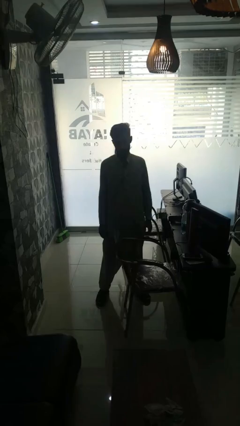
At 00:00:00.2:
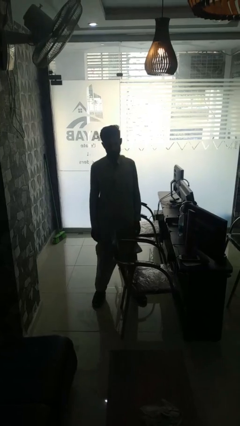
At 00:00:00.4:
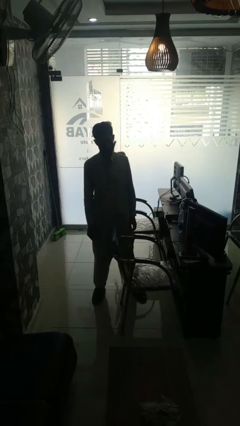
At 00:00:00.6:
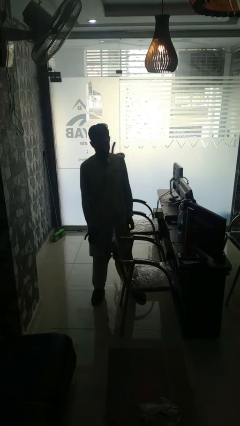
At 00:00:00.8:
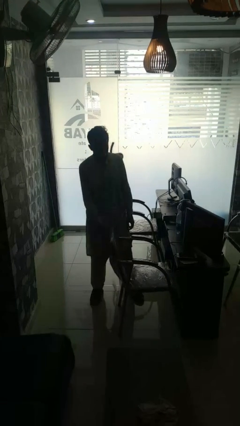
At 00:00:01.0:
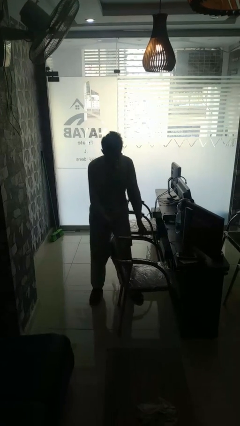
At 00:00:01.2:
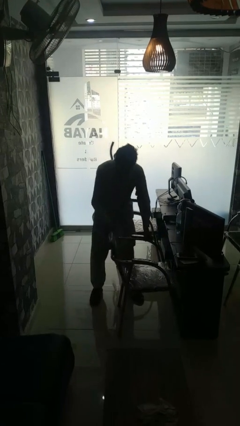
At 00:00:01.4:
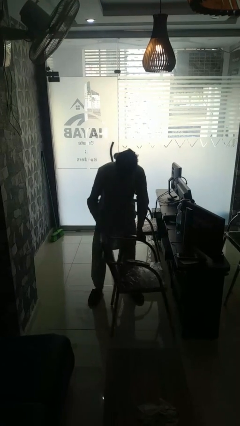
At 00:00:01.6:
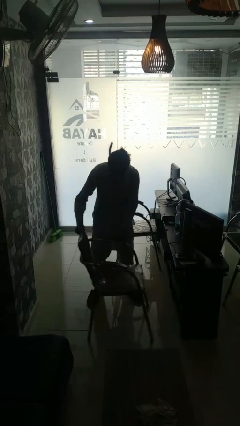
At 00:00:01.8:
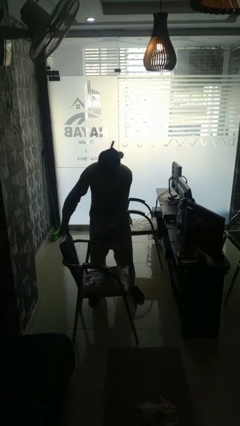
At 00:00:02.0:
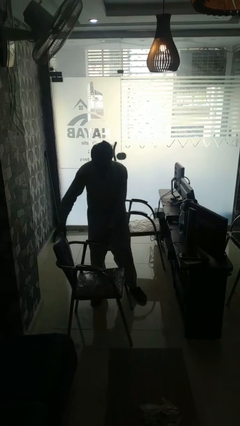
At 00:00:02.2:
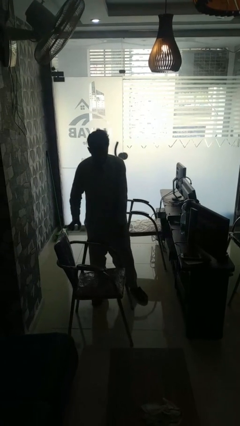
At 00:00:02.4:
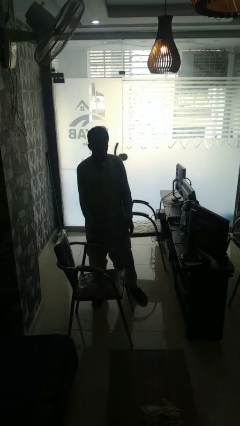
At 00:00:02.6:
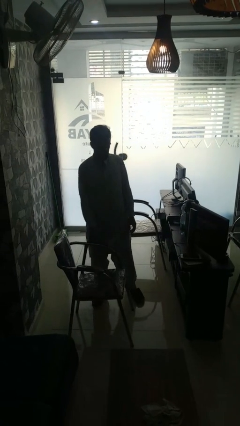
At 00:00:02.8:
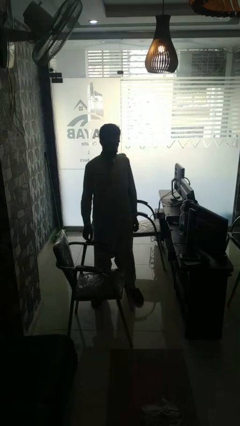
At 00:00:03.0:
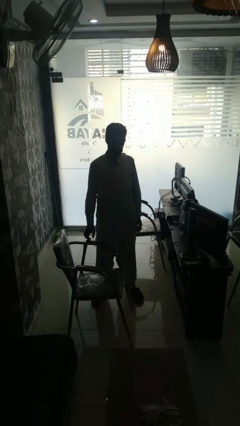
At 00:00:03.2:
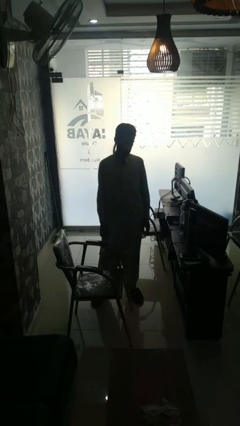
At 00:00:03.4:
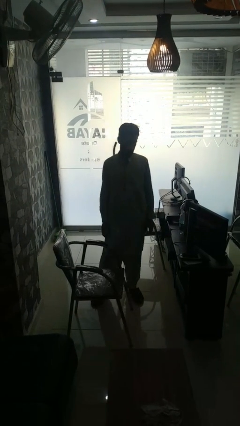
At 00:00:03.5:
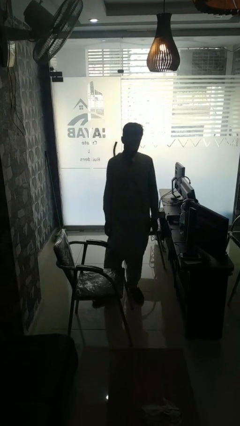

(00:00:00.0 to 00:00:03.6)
person pulls out chair

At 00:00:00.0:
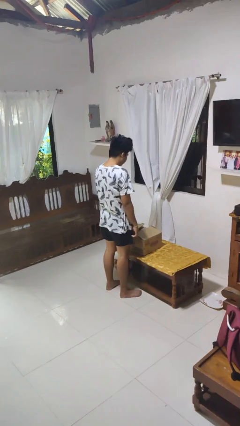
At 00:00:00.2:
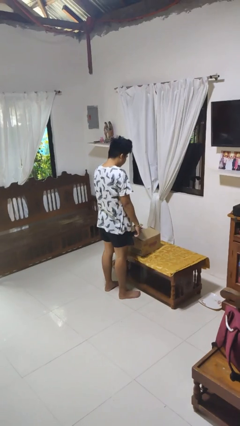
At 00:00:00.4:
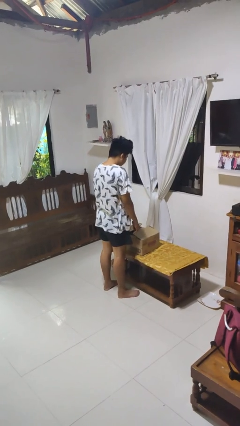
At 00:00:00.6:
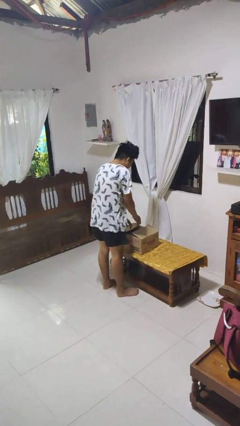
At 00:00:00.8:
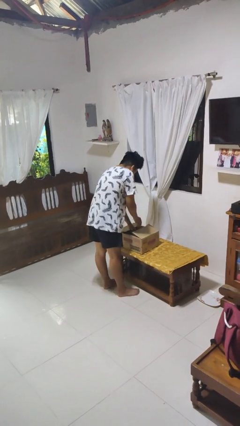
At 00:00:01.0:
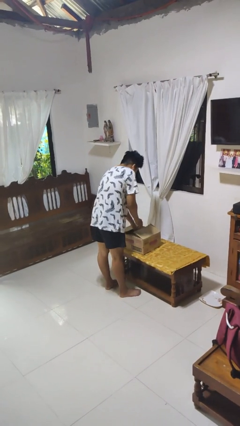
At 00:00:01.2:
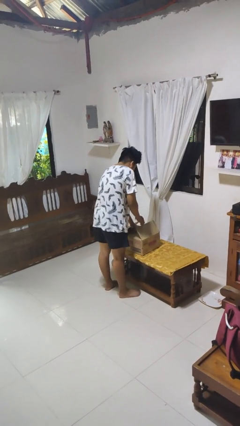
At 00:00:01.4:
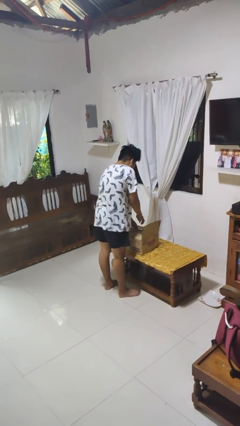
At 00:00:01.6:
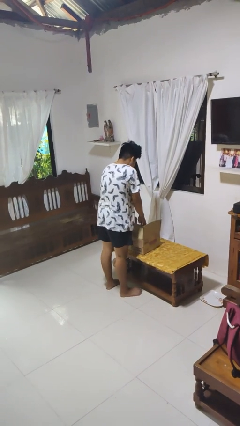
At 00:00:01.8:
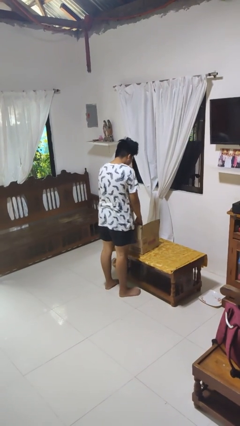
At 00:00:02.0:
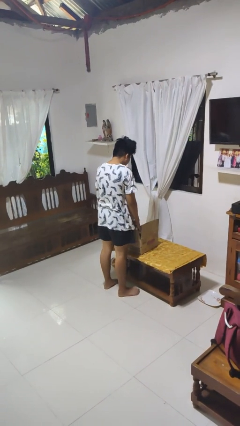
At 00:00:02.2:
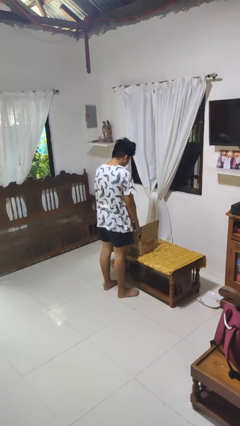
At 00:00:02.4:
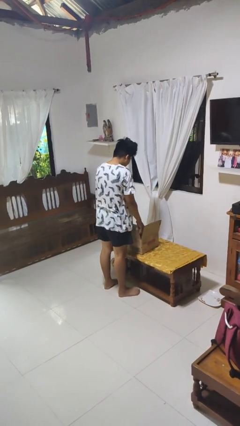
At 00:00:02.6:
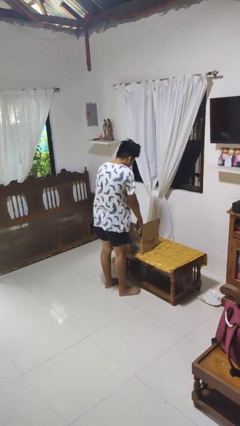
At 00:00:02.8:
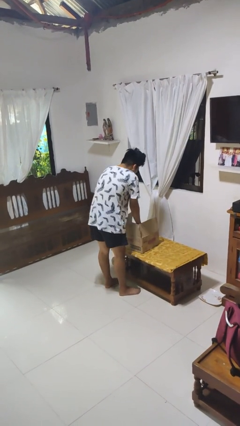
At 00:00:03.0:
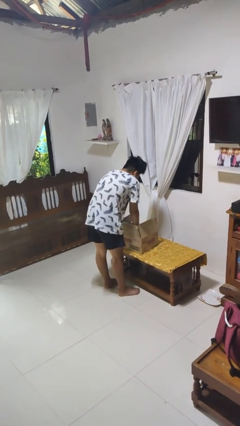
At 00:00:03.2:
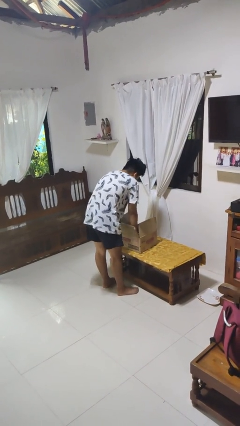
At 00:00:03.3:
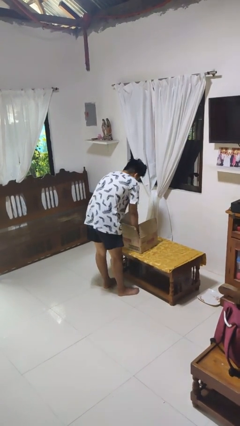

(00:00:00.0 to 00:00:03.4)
person searches in box

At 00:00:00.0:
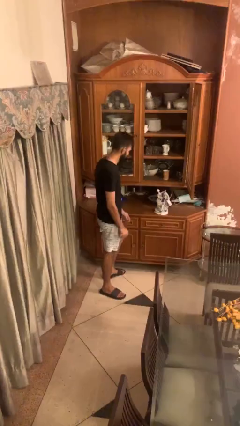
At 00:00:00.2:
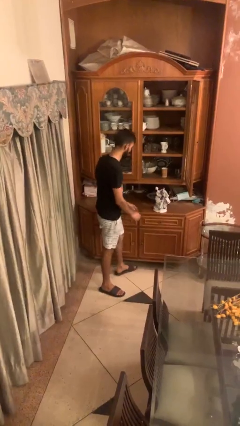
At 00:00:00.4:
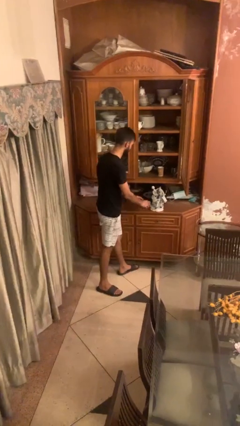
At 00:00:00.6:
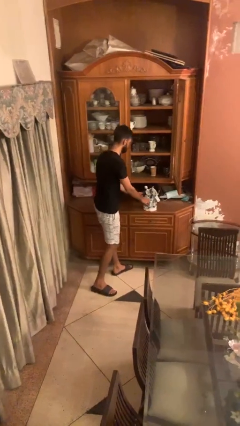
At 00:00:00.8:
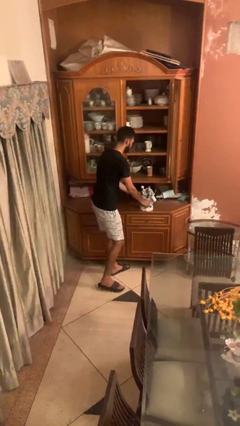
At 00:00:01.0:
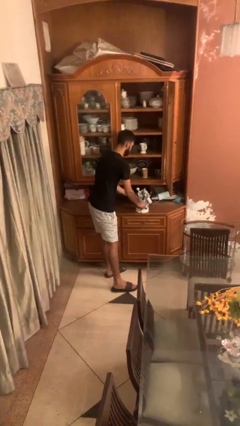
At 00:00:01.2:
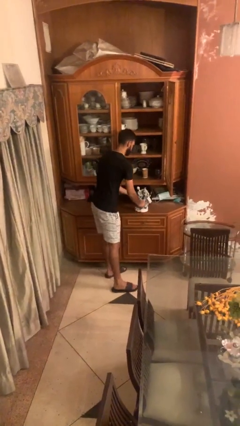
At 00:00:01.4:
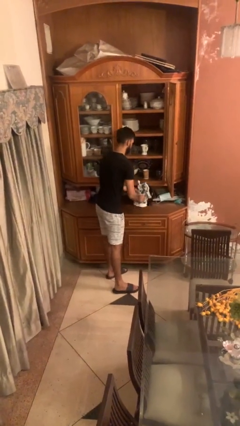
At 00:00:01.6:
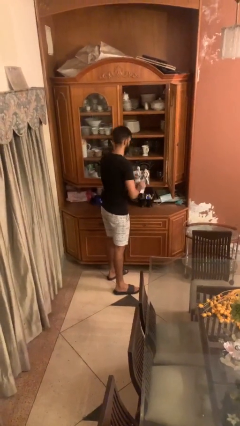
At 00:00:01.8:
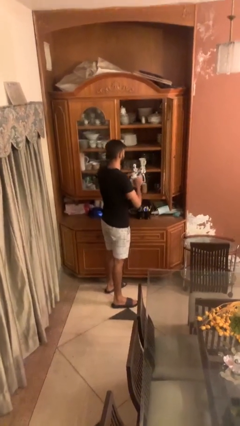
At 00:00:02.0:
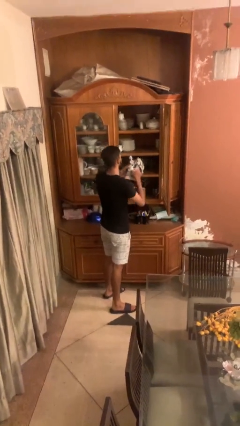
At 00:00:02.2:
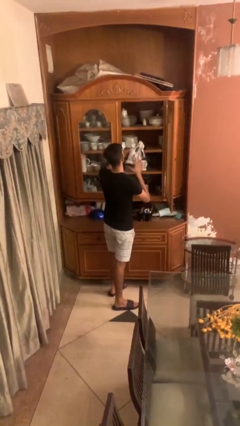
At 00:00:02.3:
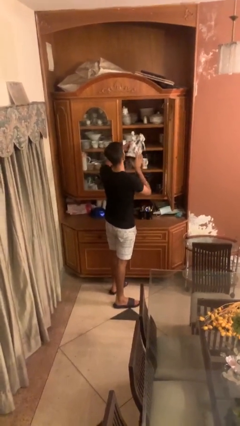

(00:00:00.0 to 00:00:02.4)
person picks up object from table

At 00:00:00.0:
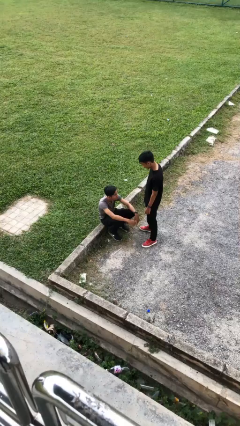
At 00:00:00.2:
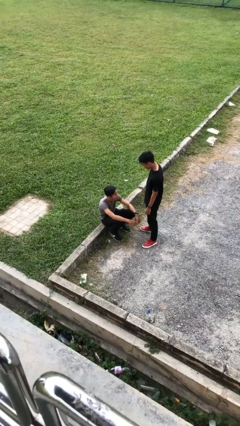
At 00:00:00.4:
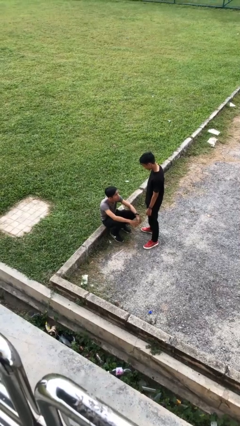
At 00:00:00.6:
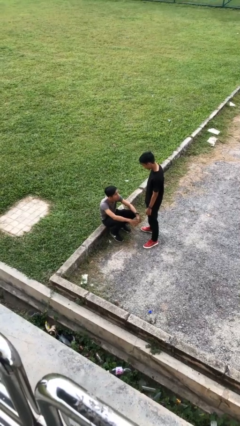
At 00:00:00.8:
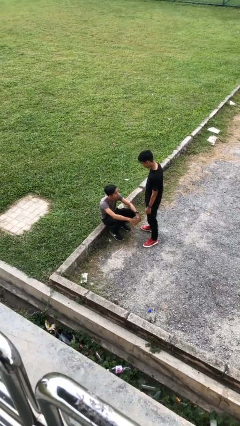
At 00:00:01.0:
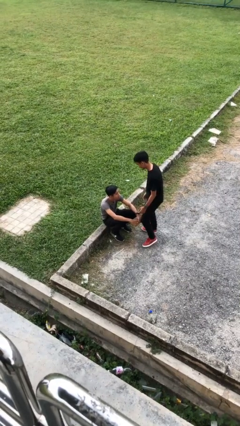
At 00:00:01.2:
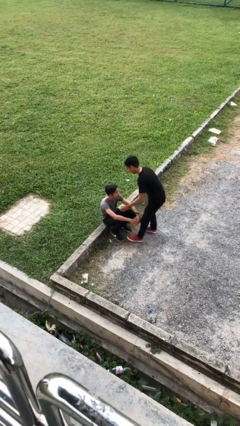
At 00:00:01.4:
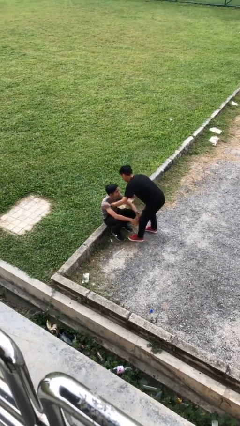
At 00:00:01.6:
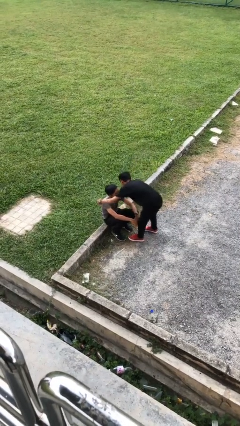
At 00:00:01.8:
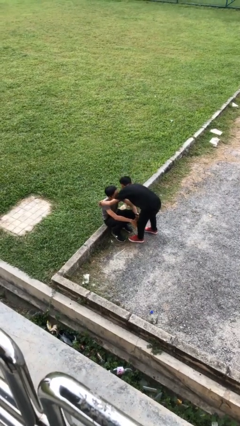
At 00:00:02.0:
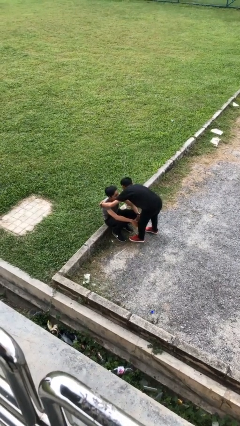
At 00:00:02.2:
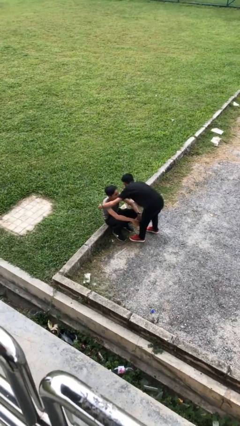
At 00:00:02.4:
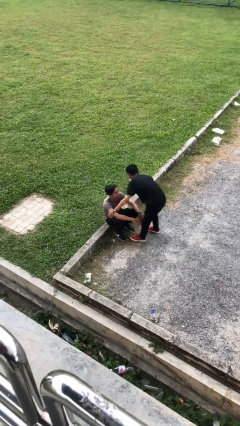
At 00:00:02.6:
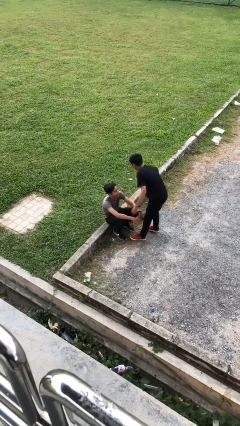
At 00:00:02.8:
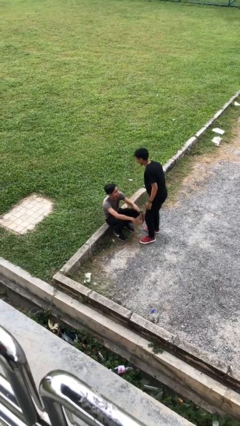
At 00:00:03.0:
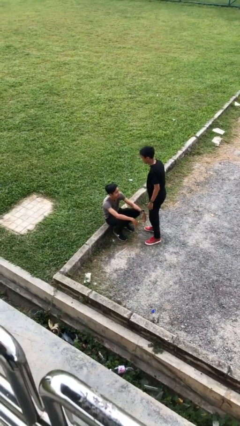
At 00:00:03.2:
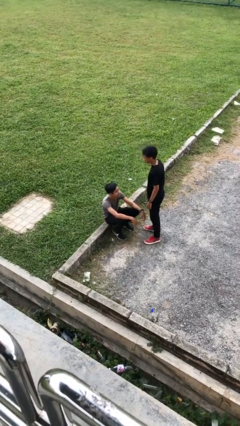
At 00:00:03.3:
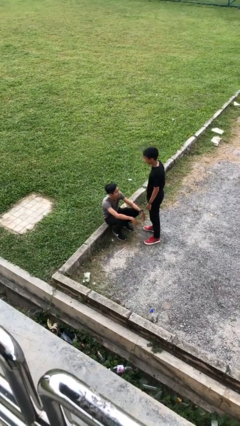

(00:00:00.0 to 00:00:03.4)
person embraces person

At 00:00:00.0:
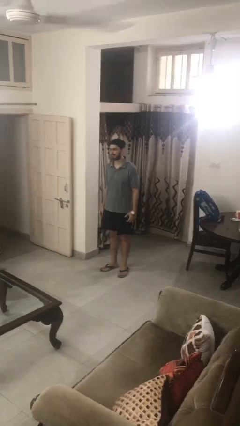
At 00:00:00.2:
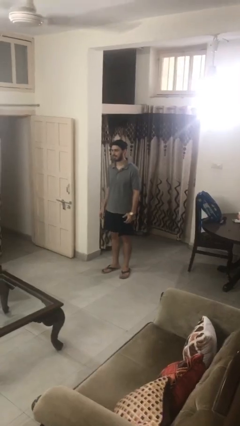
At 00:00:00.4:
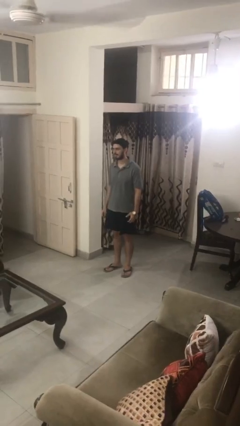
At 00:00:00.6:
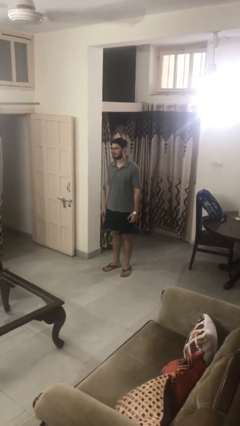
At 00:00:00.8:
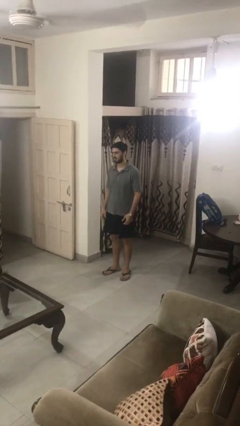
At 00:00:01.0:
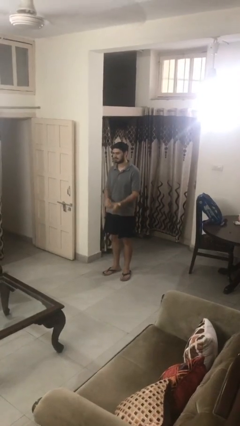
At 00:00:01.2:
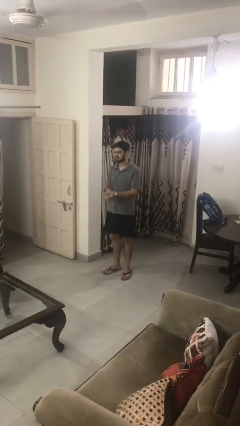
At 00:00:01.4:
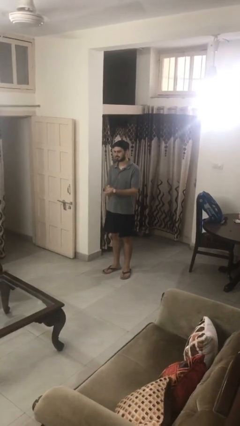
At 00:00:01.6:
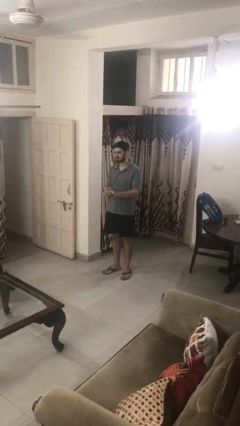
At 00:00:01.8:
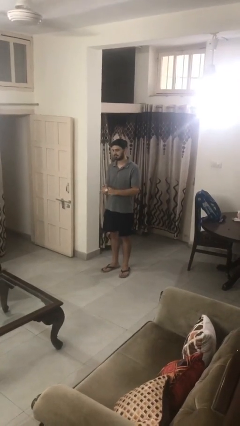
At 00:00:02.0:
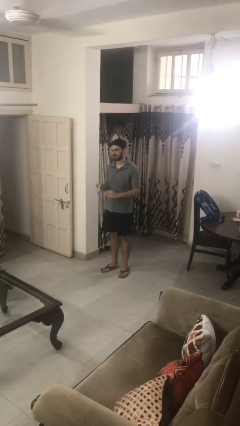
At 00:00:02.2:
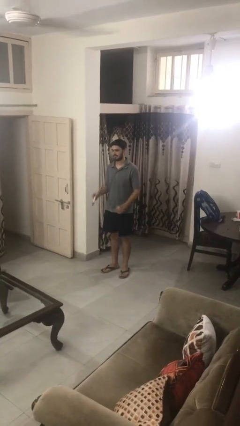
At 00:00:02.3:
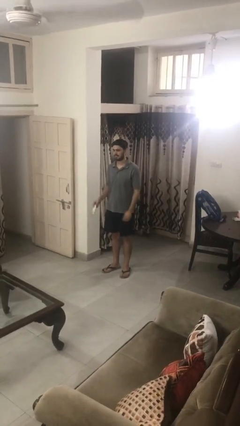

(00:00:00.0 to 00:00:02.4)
person takes off wristwatch

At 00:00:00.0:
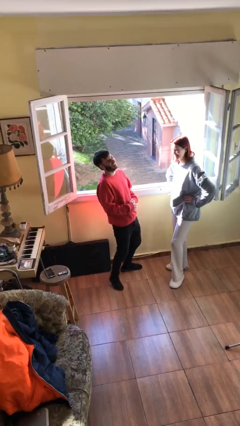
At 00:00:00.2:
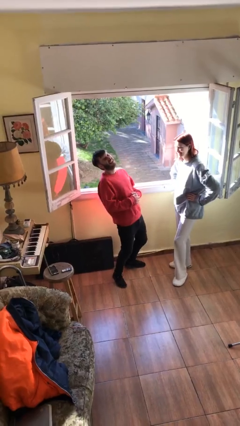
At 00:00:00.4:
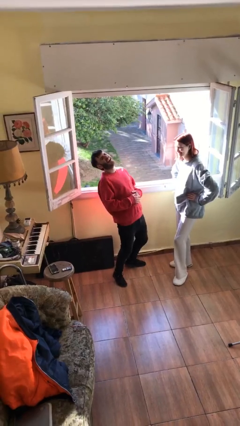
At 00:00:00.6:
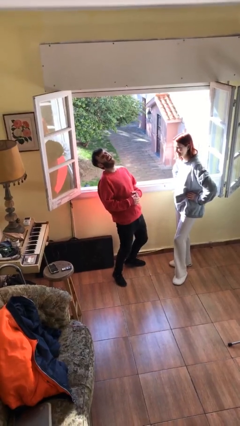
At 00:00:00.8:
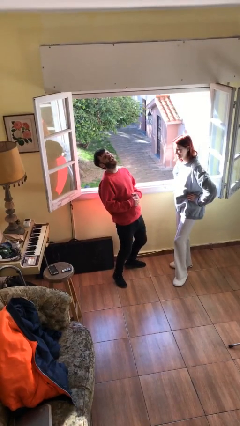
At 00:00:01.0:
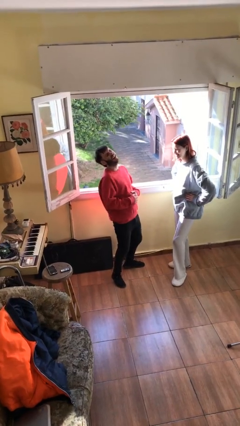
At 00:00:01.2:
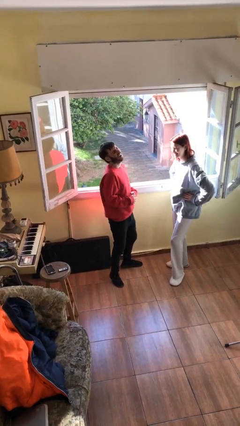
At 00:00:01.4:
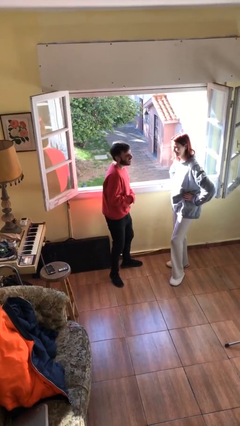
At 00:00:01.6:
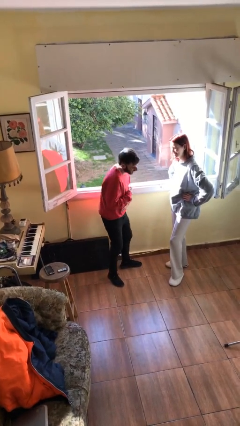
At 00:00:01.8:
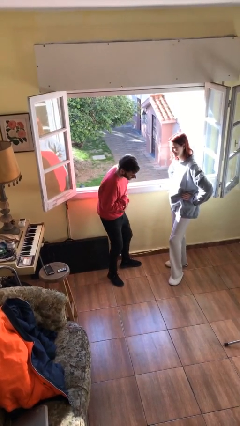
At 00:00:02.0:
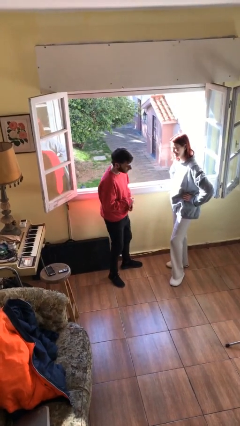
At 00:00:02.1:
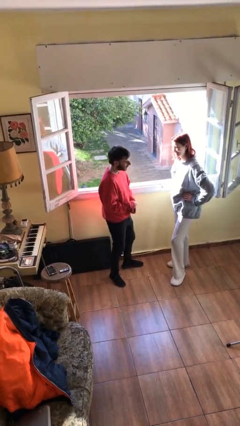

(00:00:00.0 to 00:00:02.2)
person laughs with person
